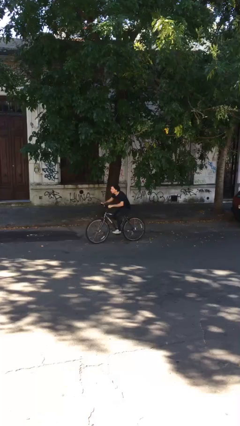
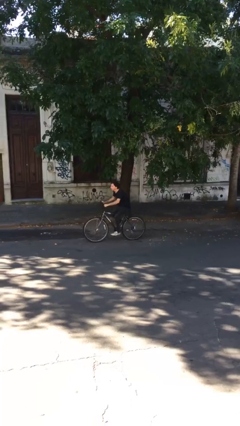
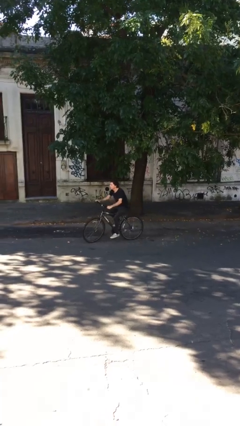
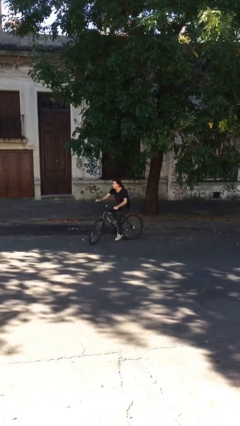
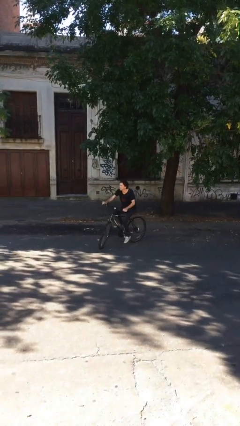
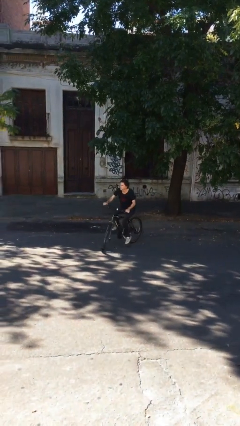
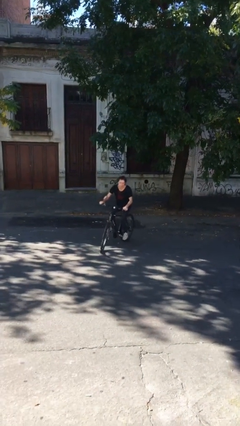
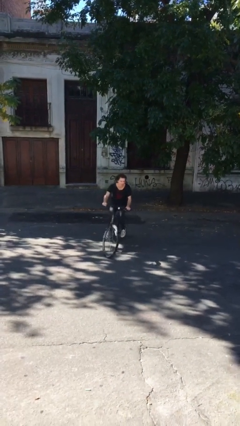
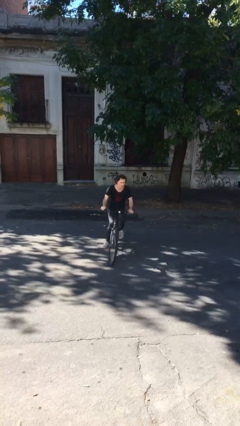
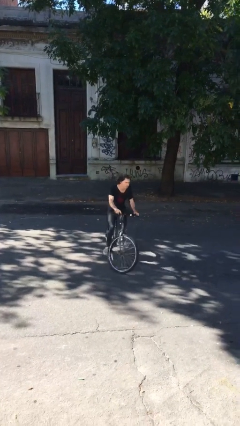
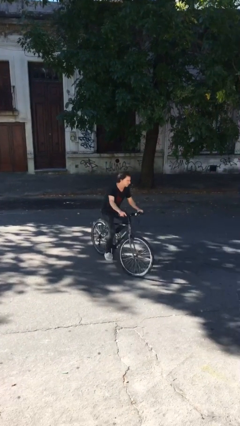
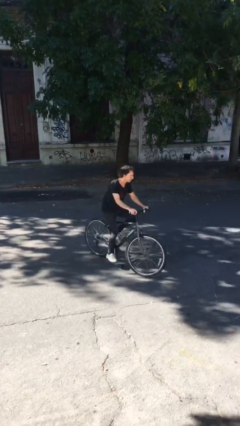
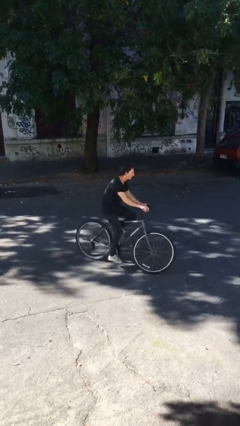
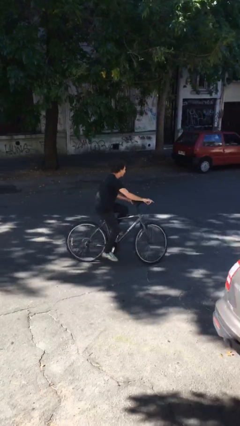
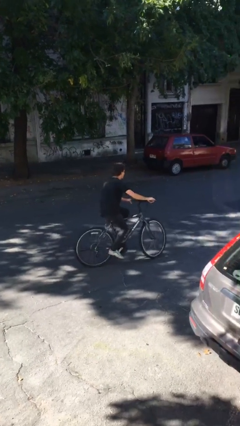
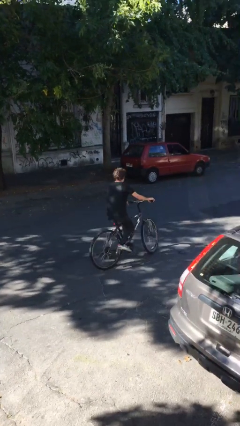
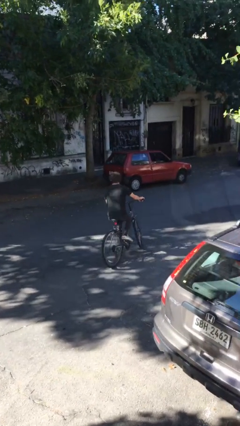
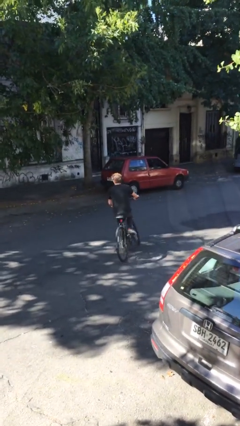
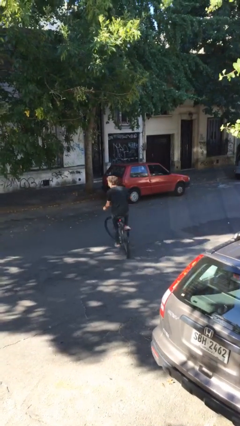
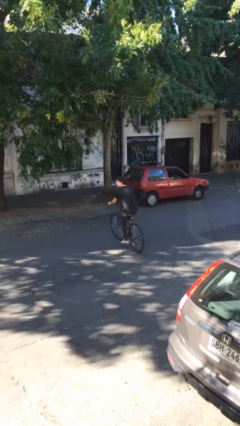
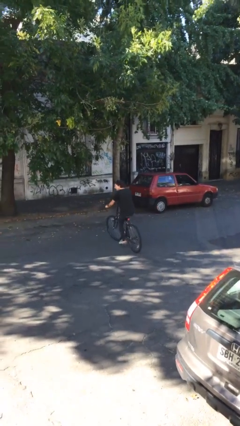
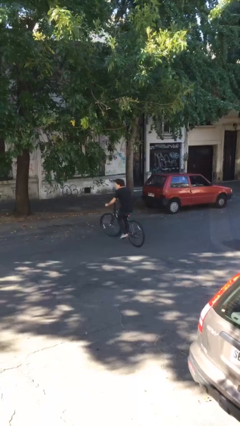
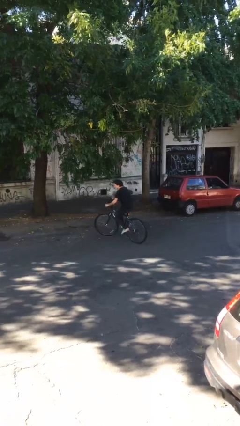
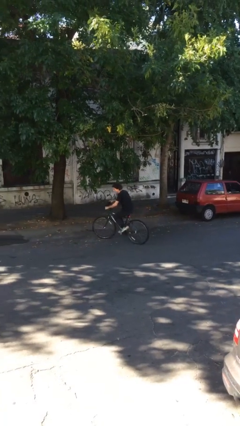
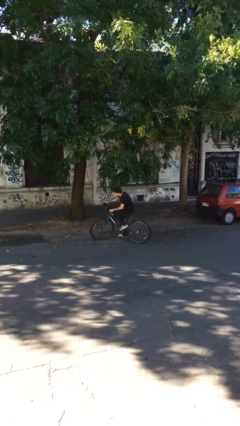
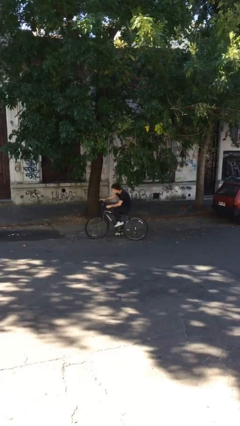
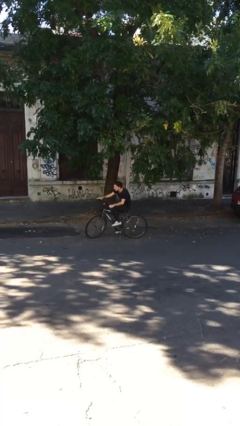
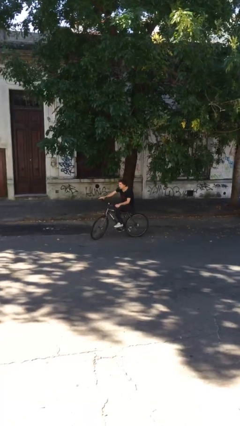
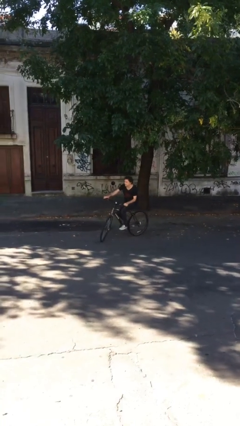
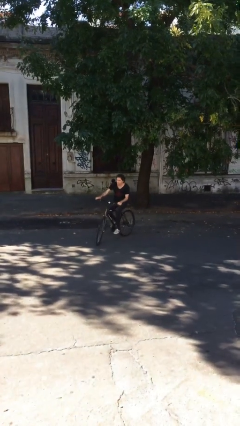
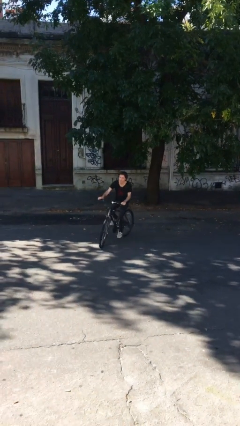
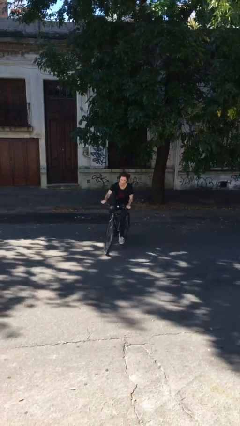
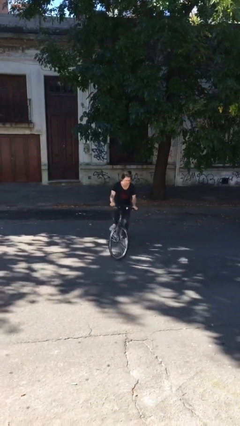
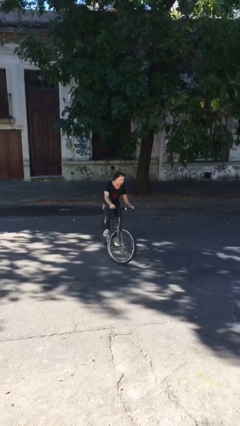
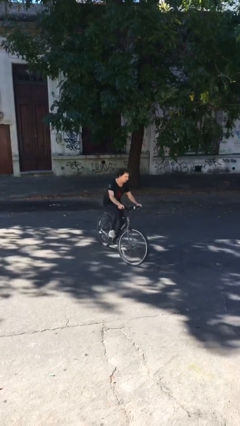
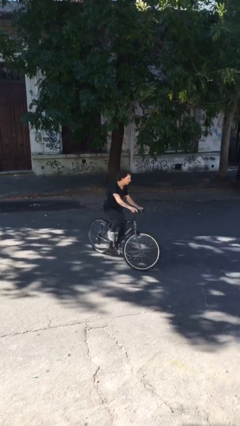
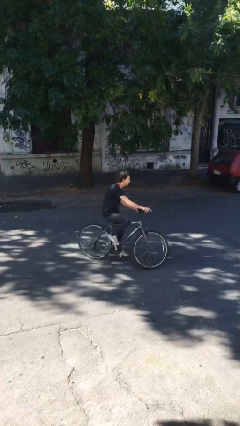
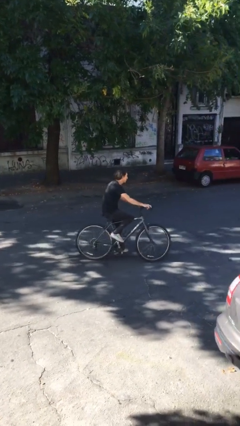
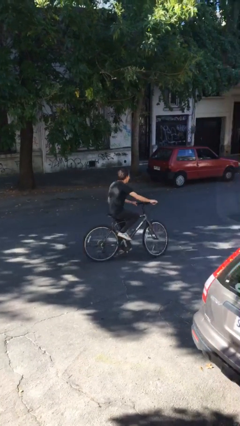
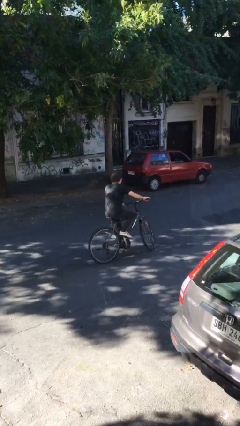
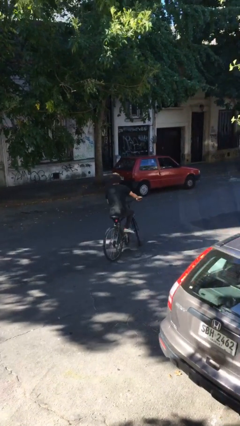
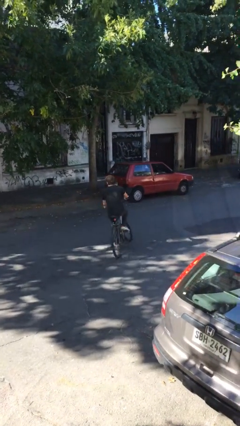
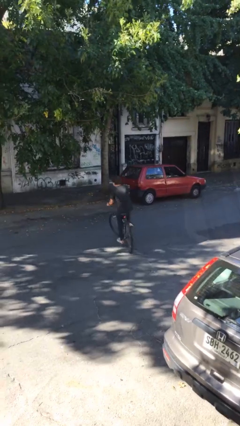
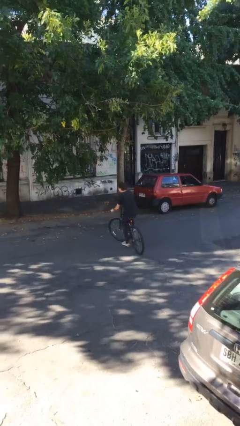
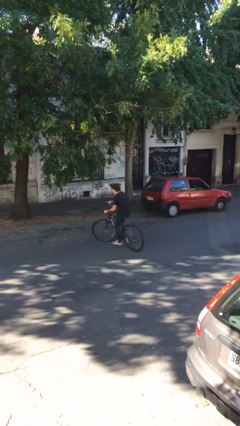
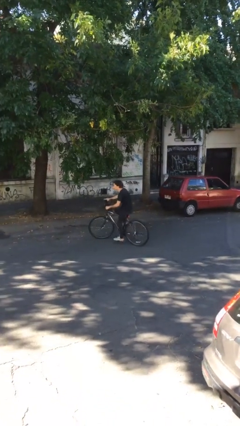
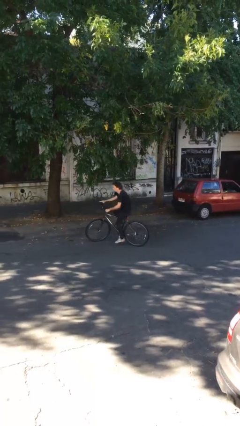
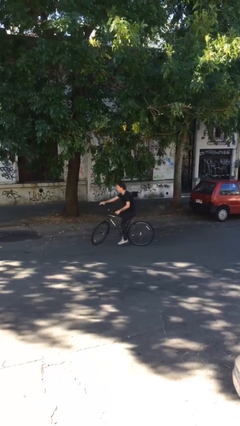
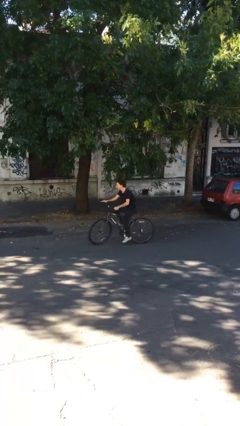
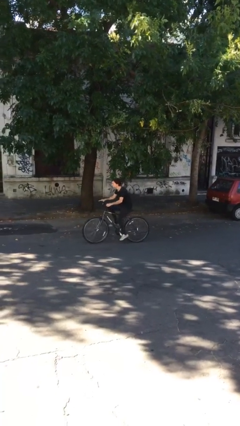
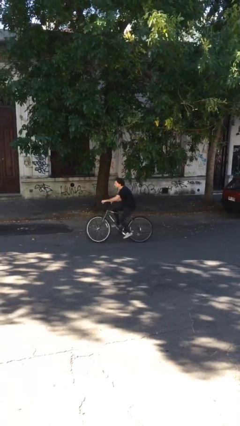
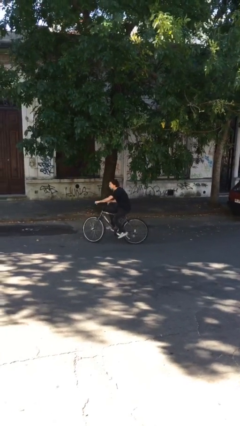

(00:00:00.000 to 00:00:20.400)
person rides bicycle

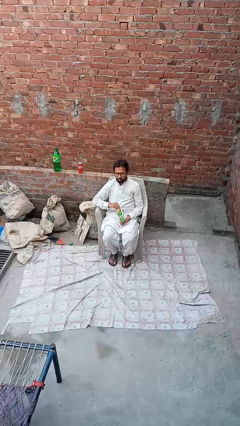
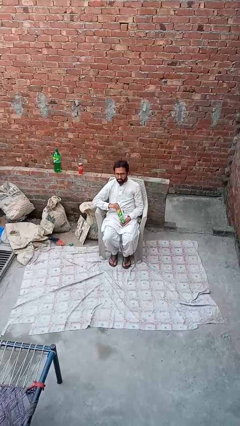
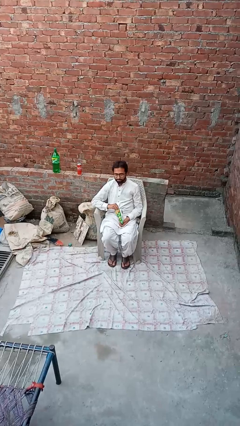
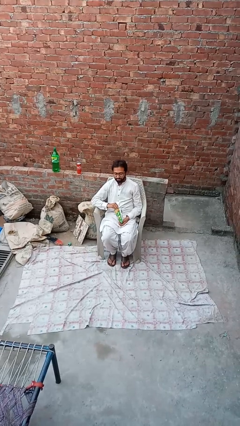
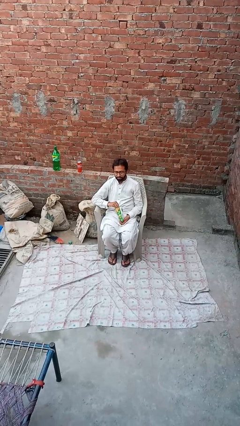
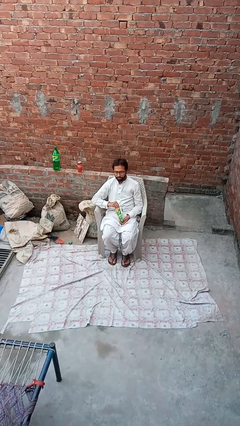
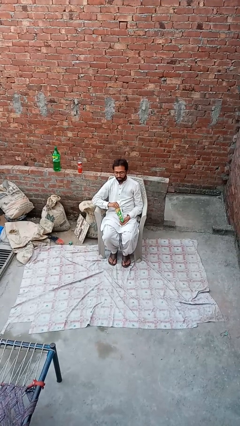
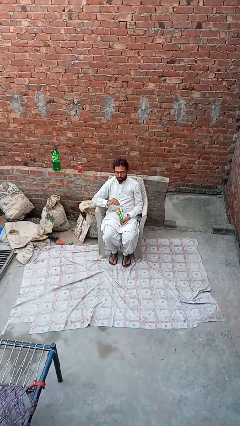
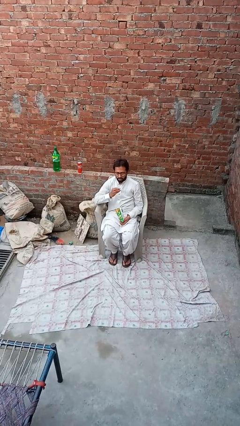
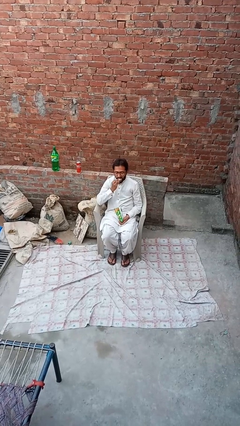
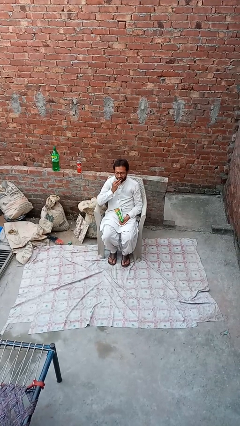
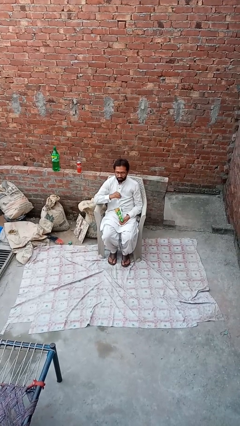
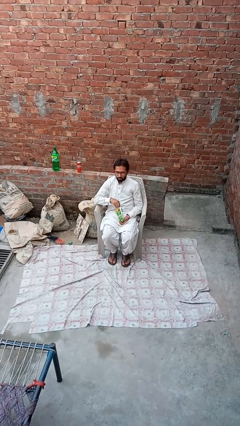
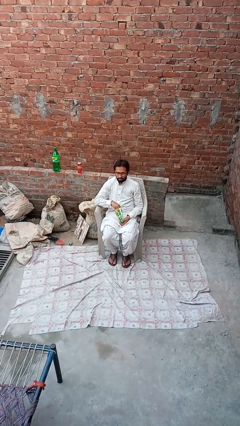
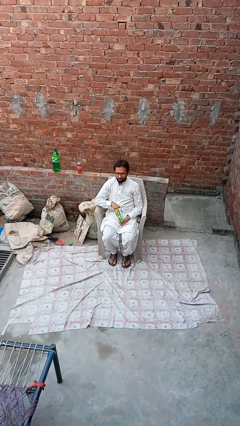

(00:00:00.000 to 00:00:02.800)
person eats snack from bag

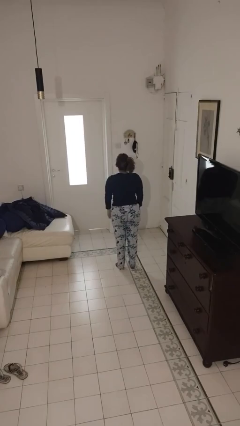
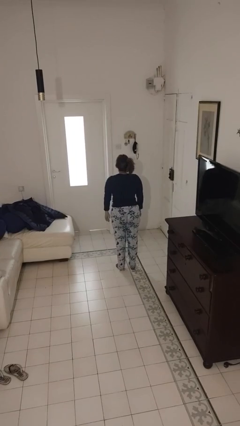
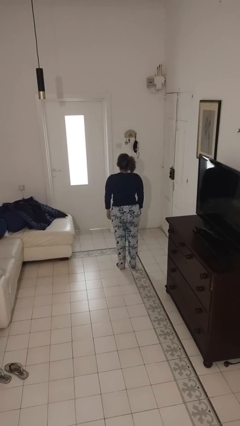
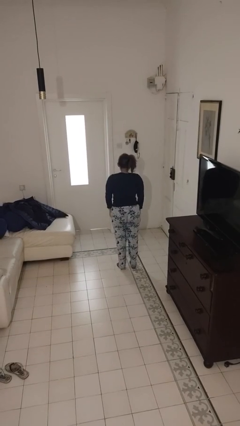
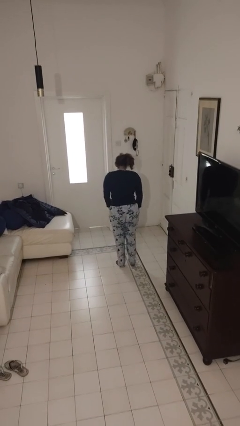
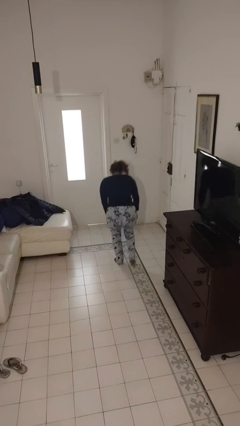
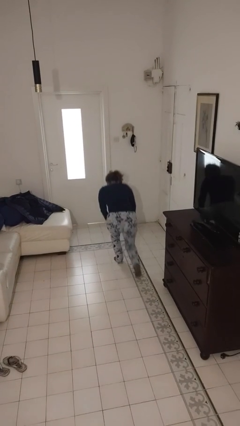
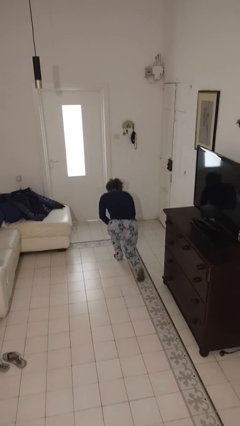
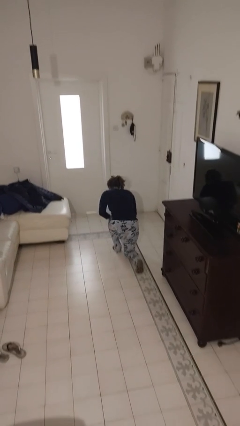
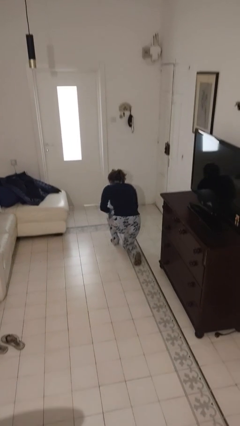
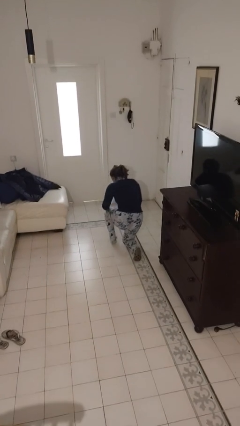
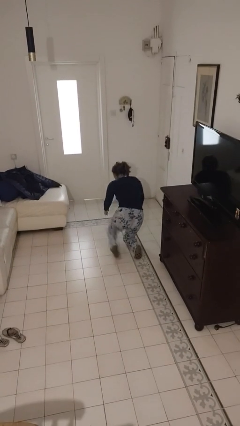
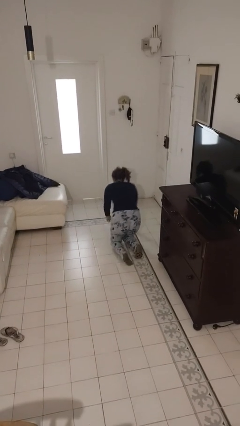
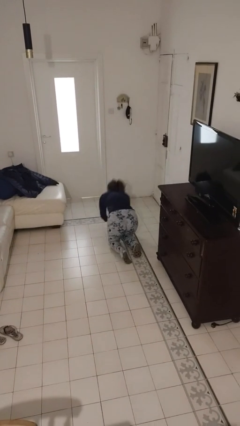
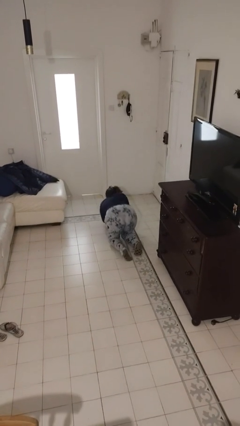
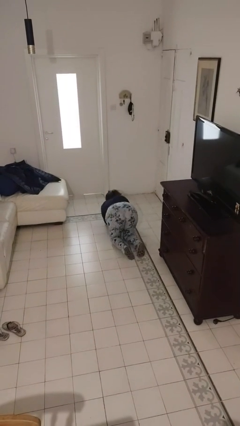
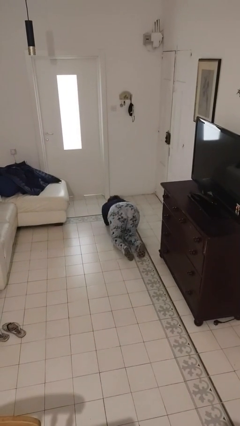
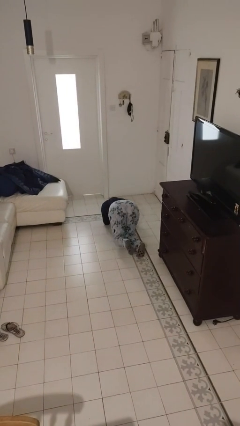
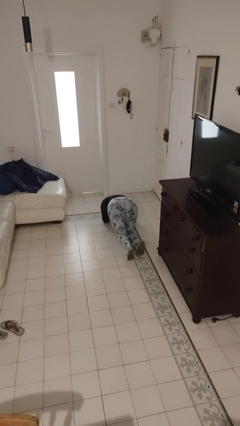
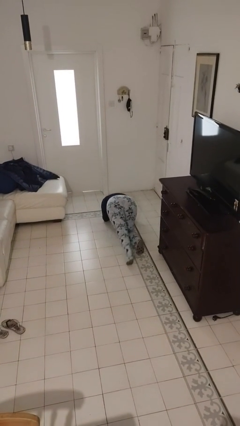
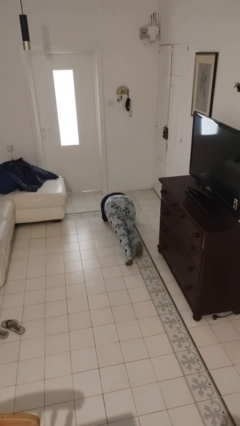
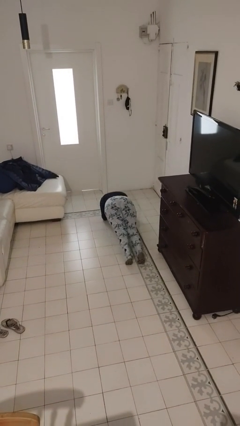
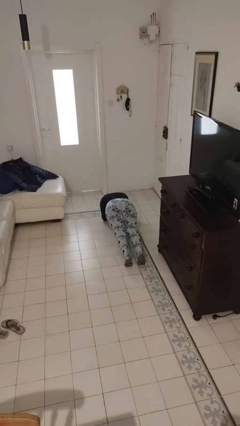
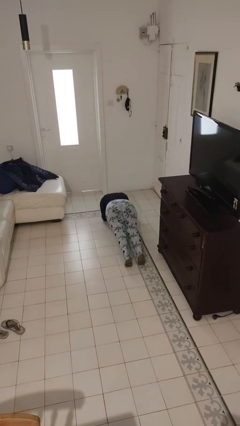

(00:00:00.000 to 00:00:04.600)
person exercises with plank
